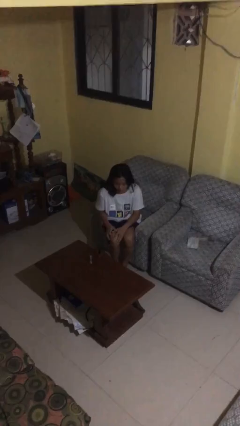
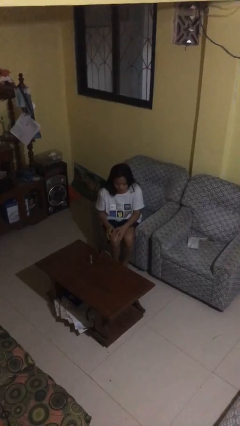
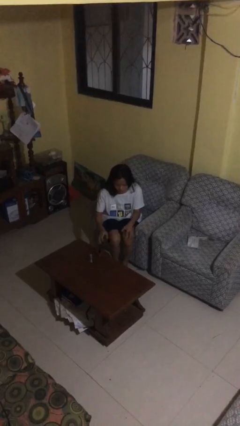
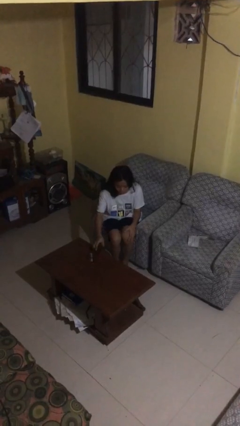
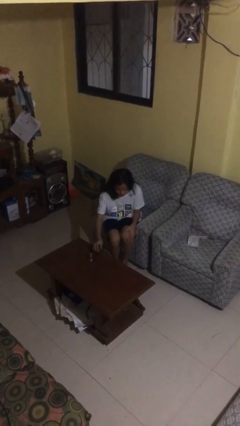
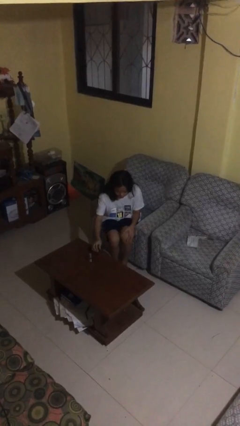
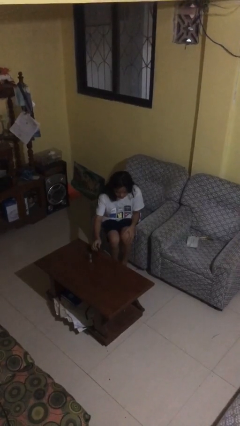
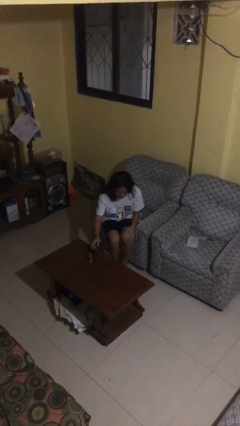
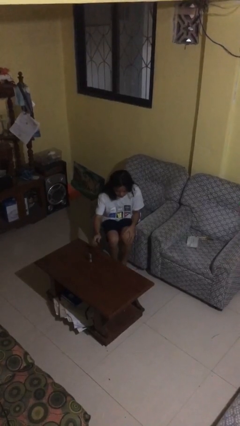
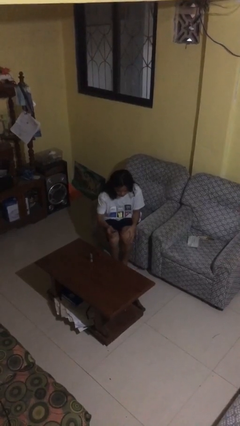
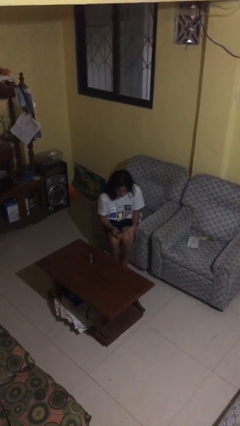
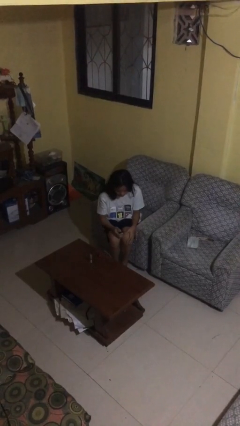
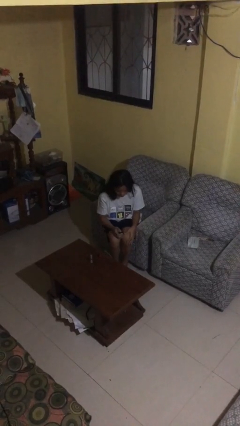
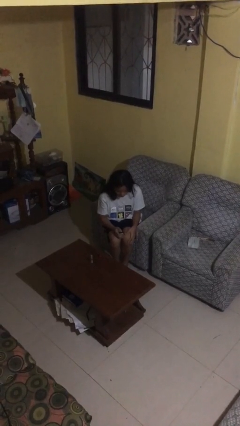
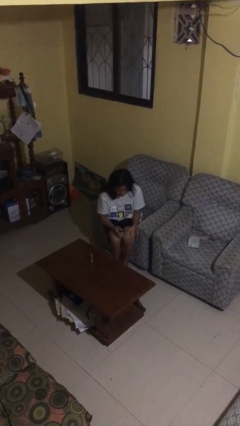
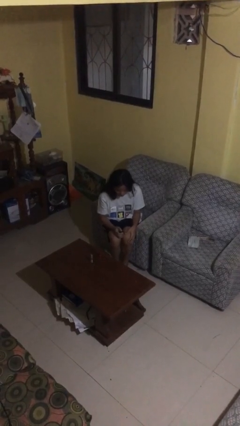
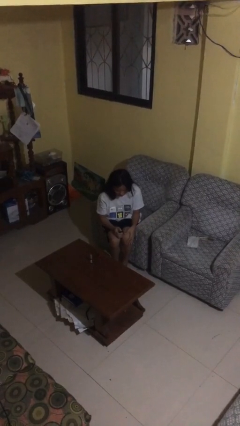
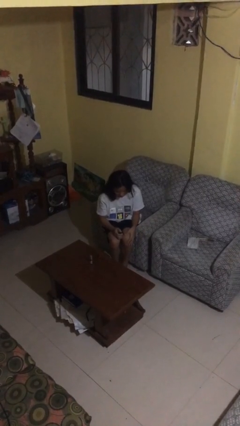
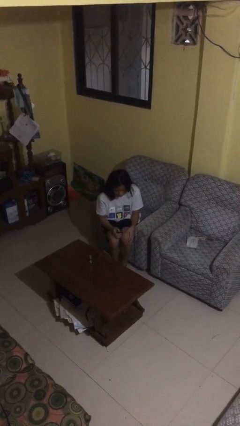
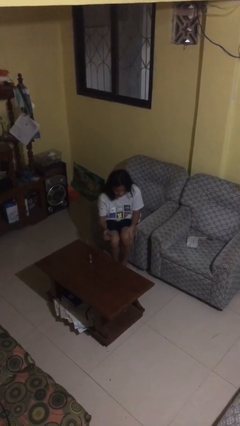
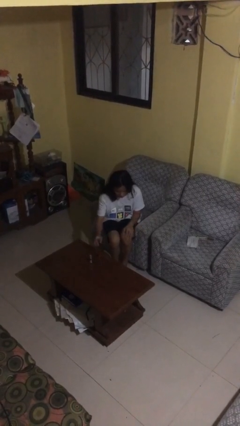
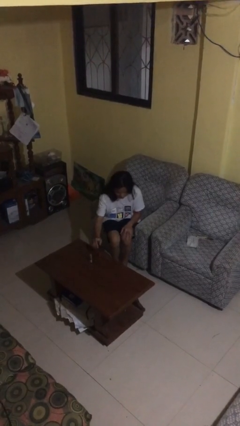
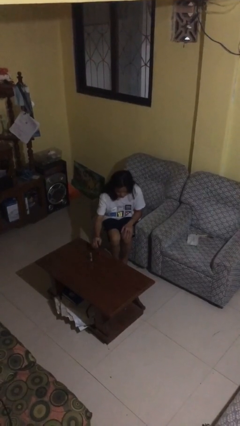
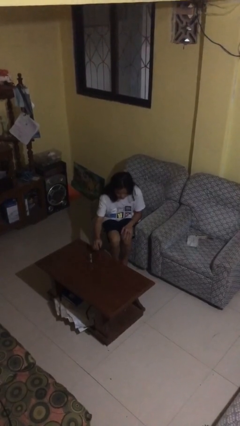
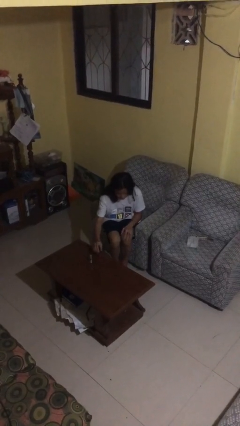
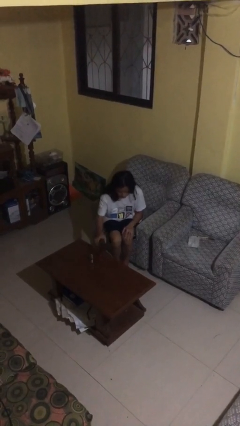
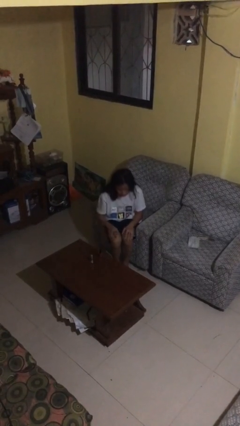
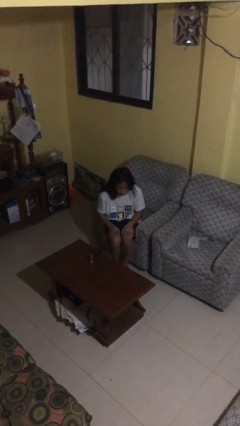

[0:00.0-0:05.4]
person paints fingernails

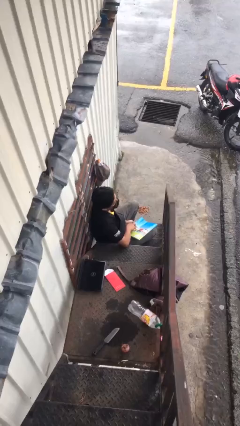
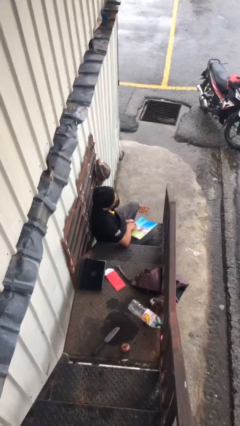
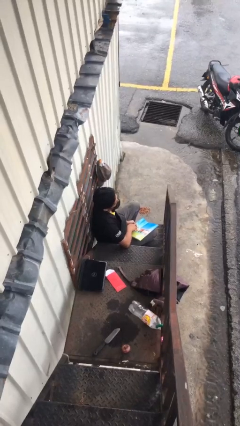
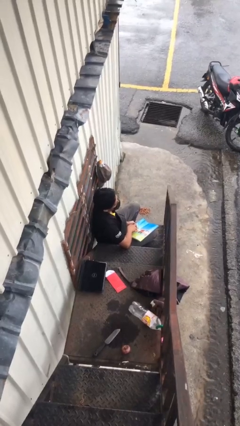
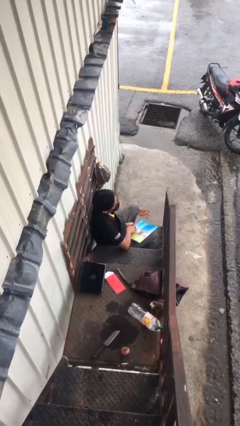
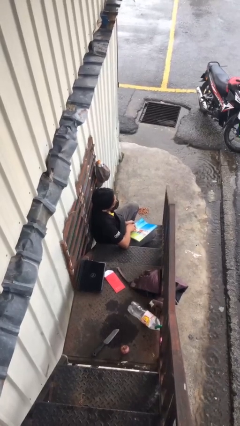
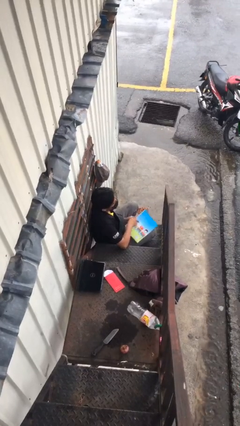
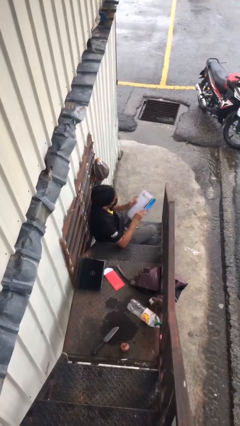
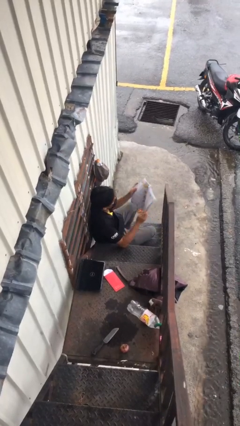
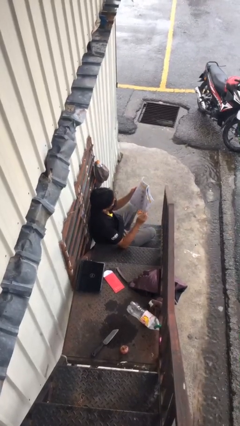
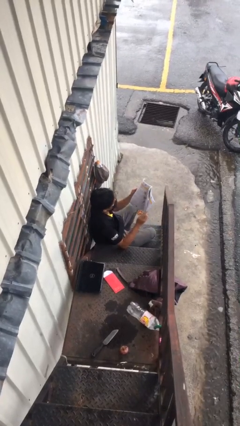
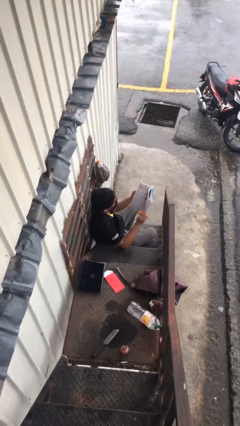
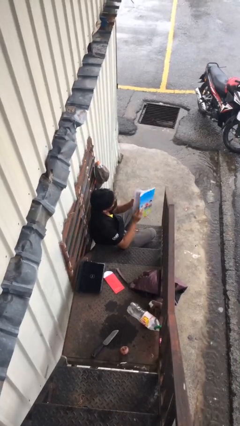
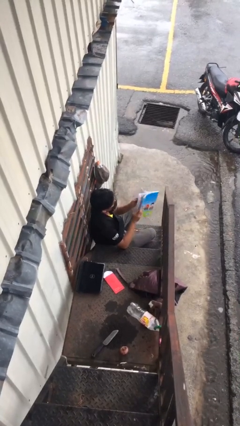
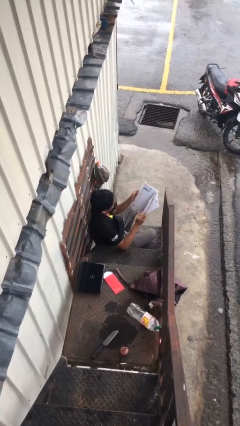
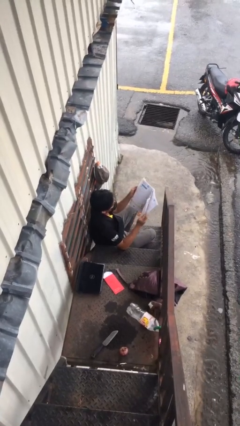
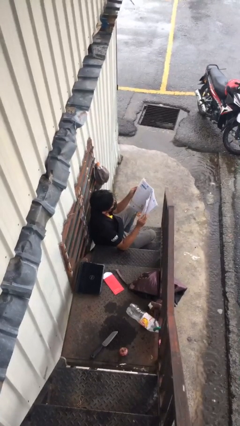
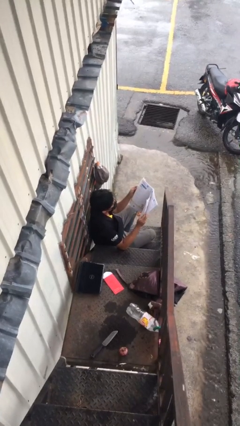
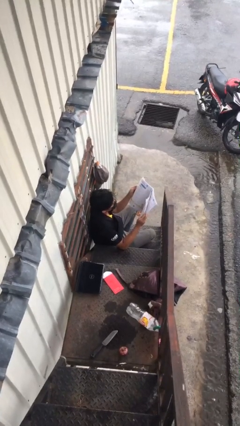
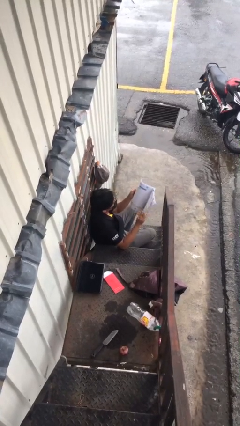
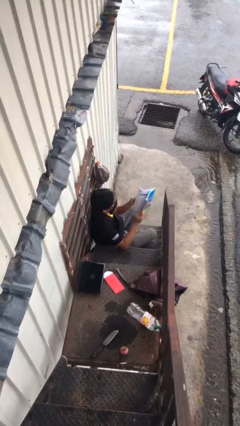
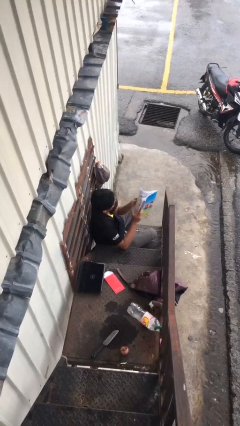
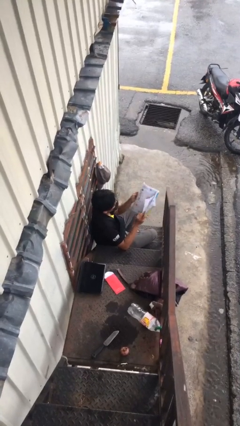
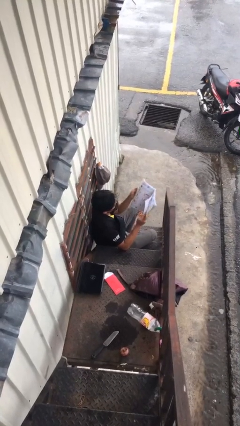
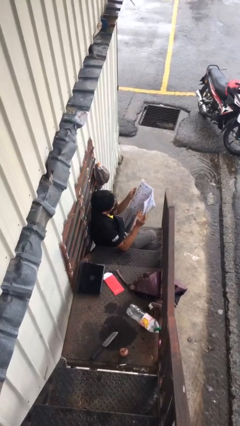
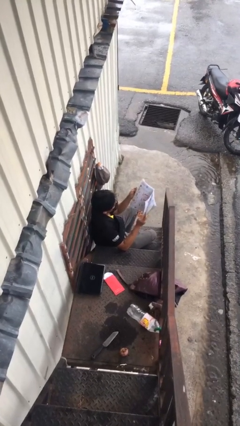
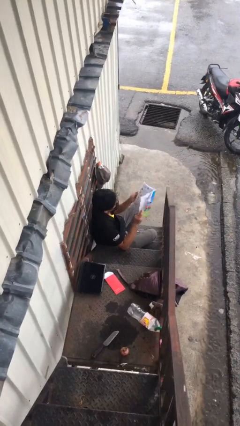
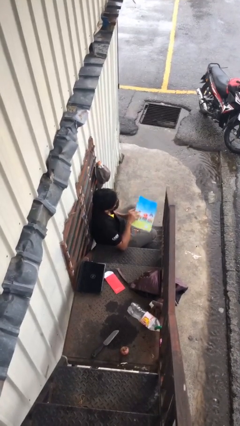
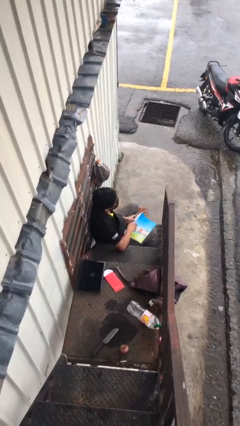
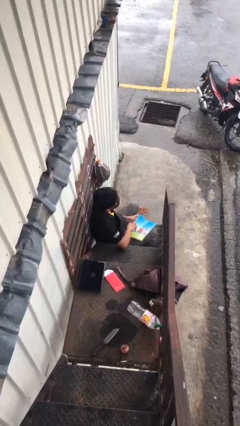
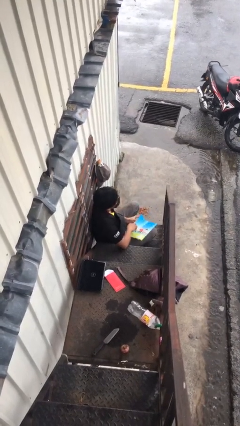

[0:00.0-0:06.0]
person reads document

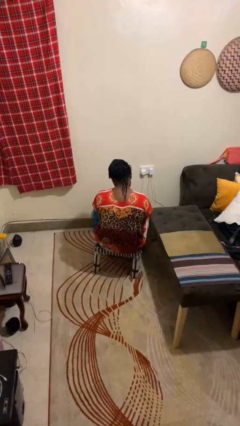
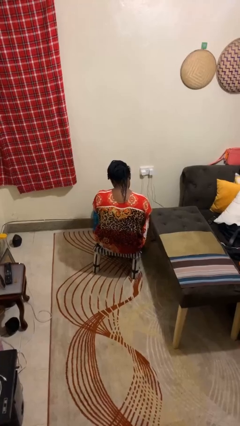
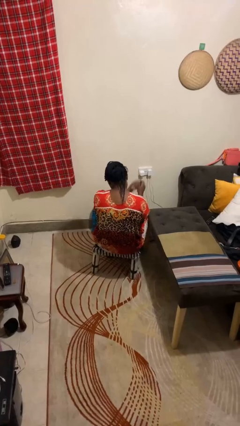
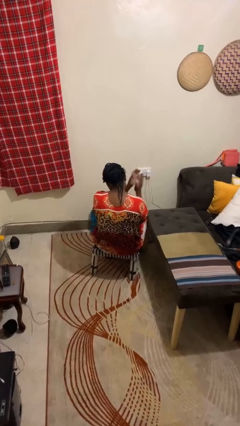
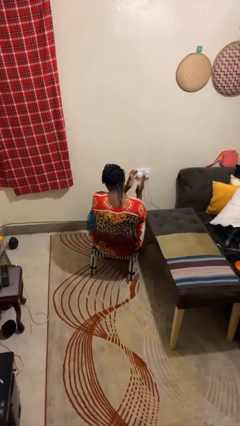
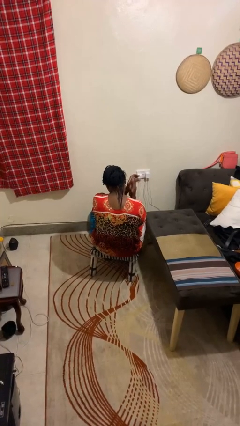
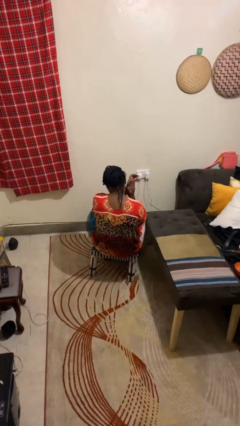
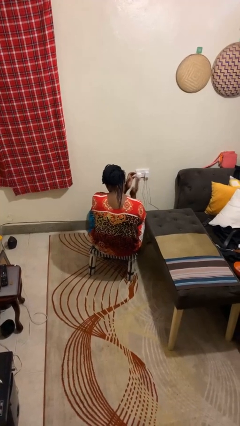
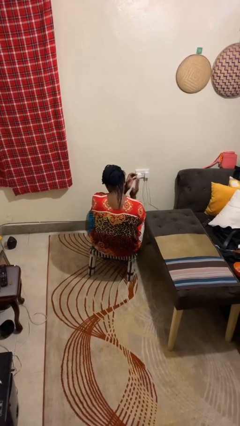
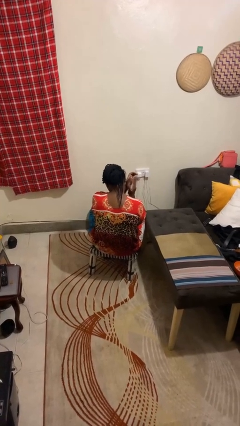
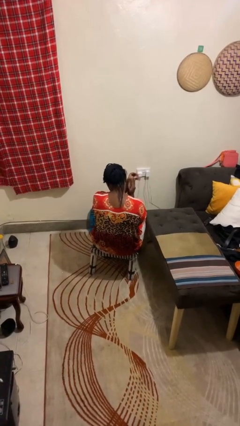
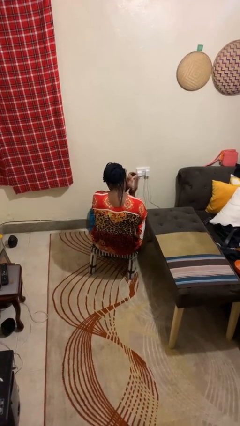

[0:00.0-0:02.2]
person claps hands

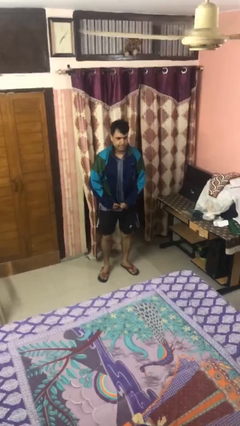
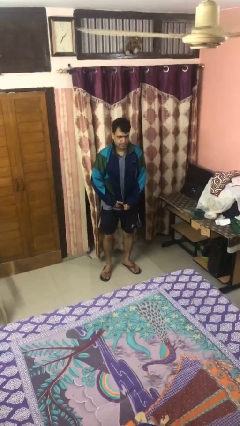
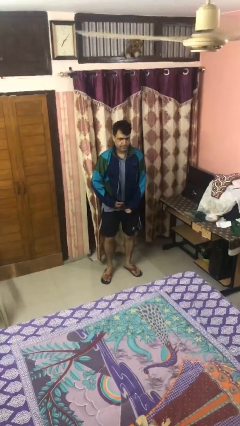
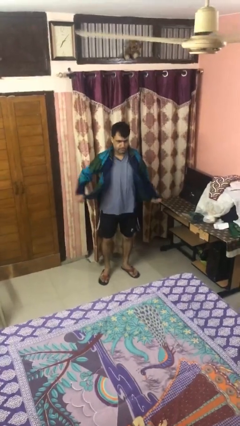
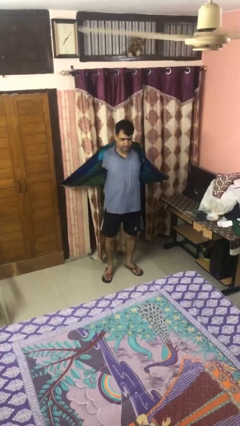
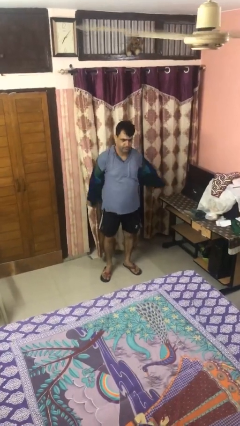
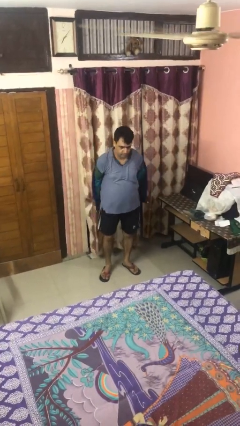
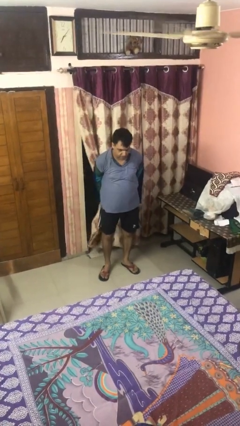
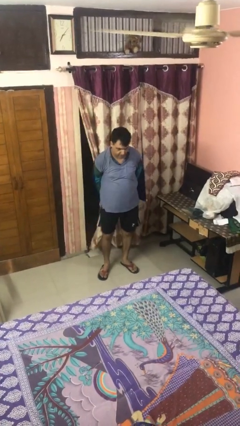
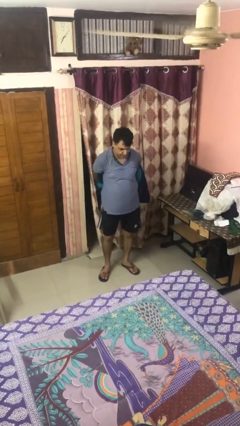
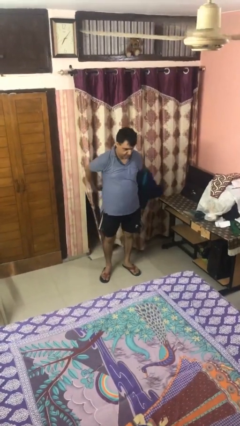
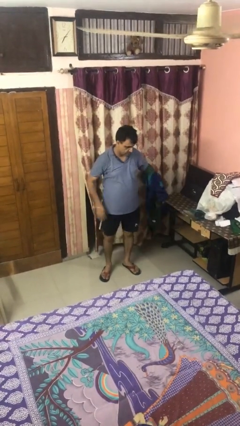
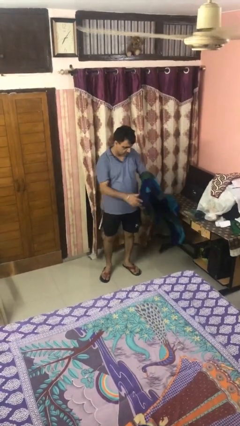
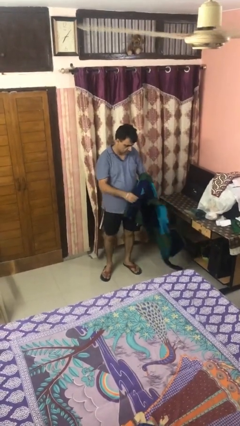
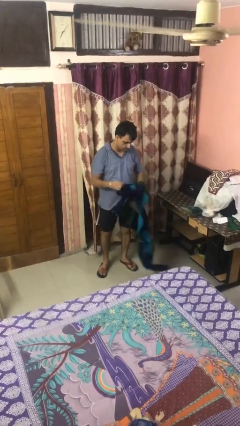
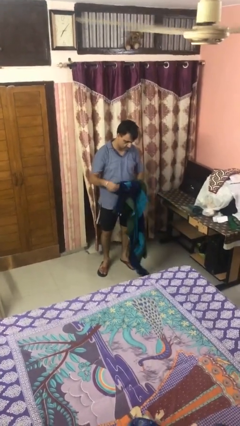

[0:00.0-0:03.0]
person takes off jacket

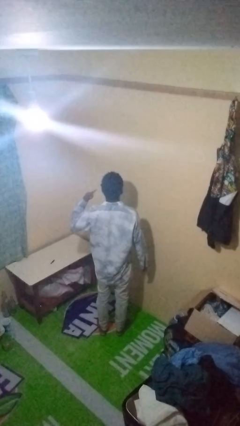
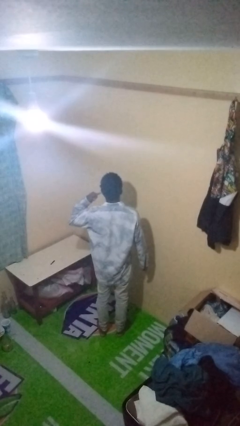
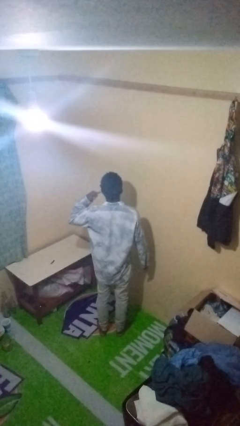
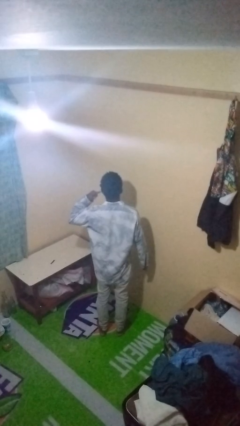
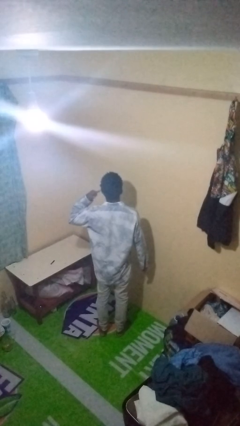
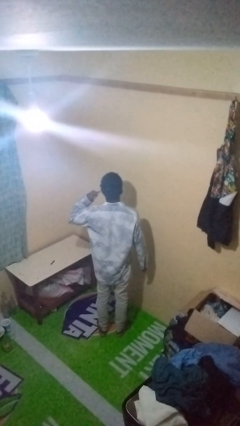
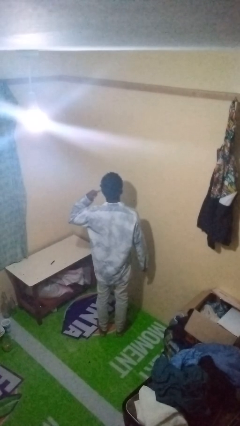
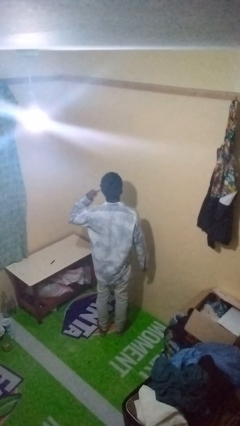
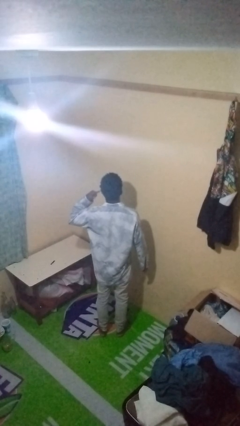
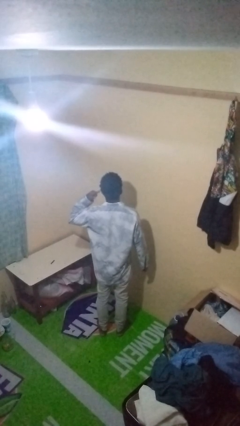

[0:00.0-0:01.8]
person gestures listen closely
